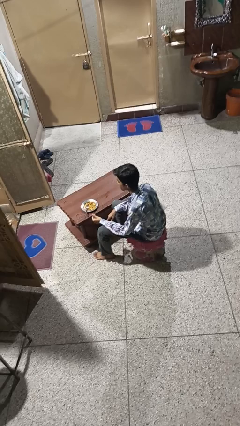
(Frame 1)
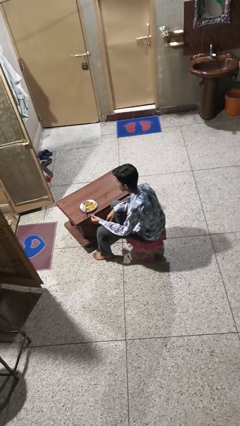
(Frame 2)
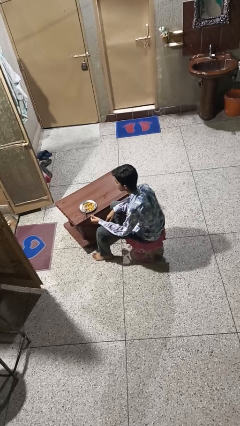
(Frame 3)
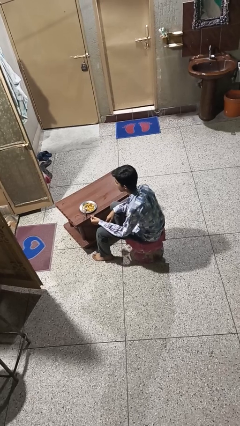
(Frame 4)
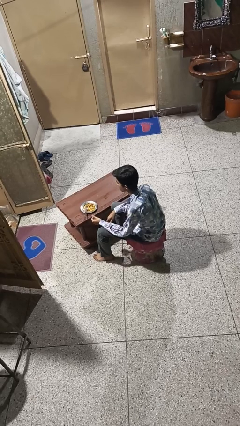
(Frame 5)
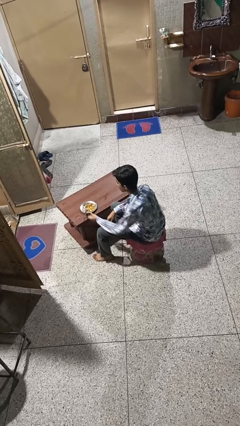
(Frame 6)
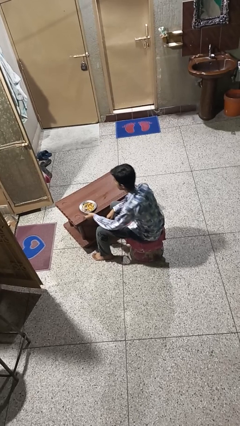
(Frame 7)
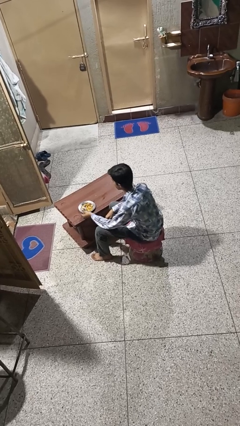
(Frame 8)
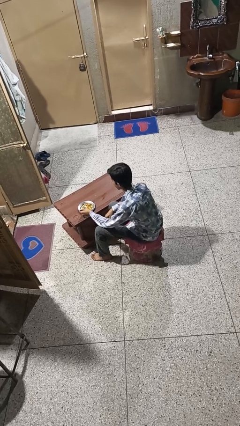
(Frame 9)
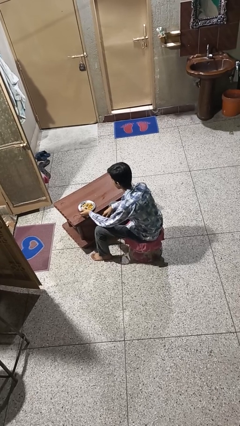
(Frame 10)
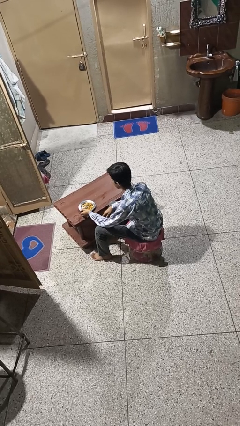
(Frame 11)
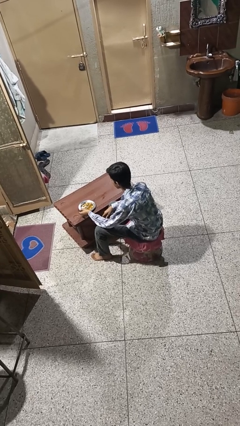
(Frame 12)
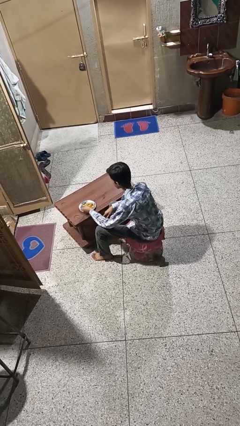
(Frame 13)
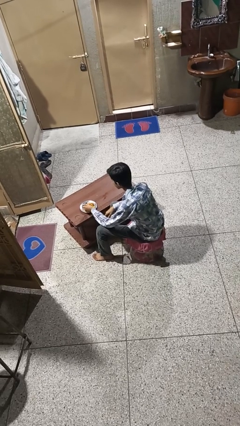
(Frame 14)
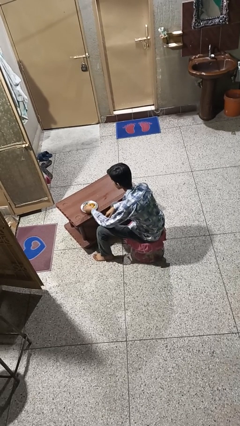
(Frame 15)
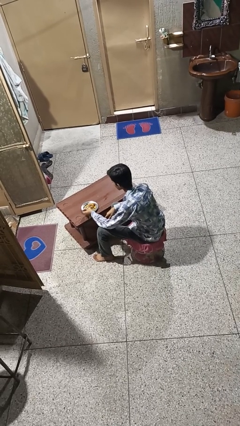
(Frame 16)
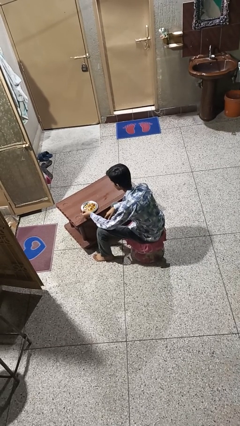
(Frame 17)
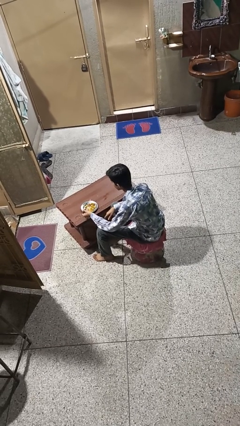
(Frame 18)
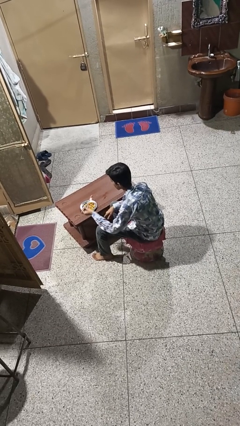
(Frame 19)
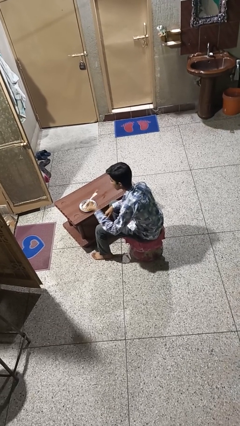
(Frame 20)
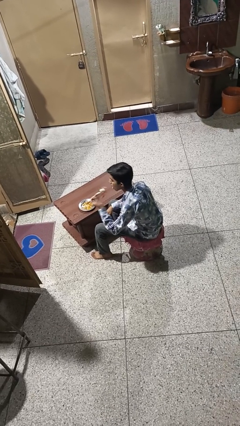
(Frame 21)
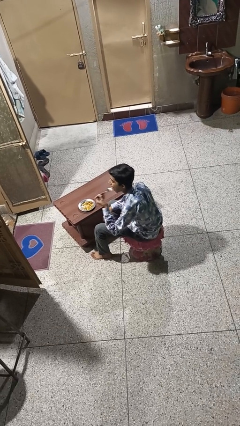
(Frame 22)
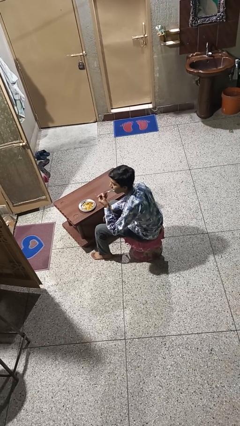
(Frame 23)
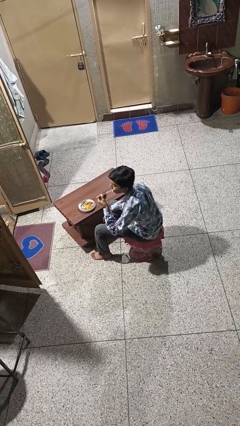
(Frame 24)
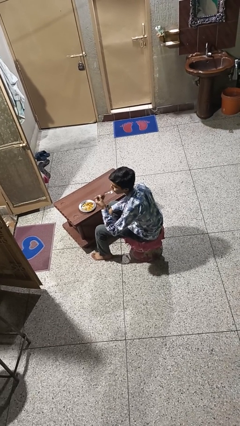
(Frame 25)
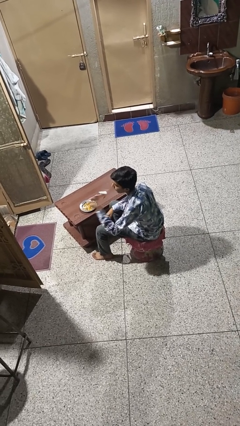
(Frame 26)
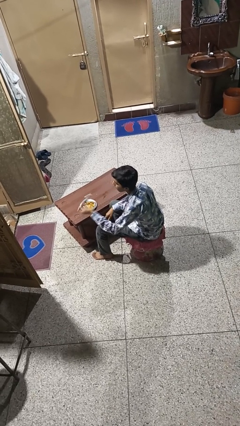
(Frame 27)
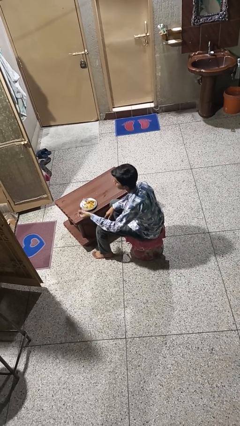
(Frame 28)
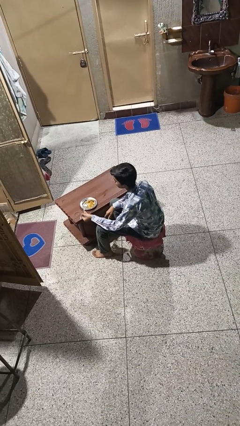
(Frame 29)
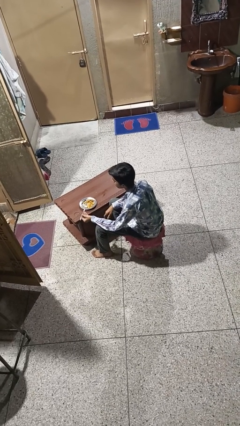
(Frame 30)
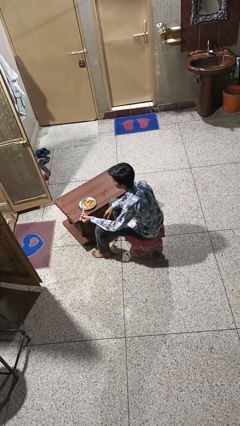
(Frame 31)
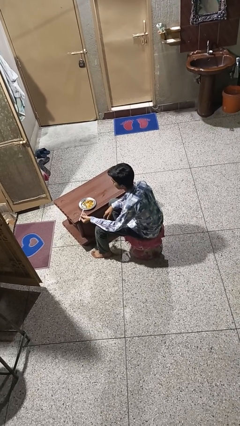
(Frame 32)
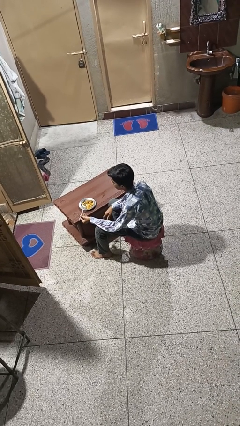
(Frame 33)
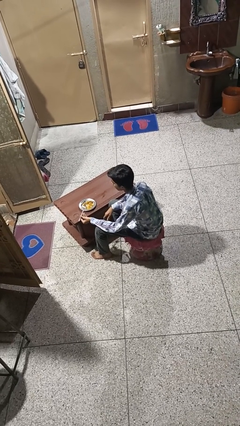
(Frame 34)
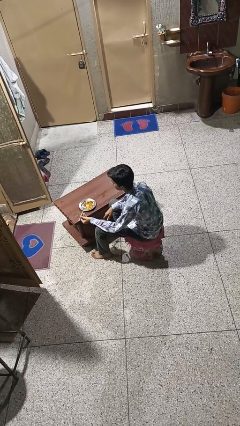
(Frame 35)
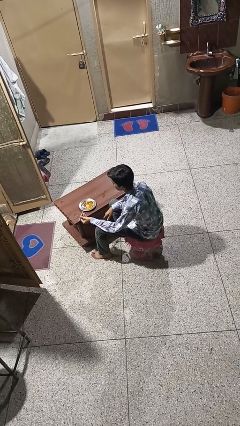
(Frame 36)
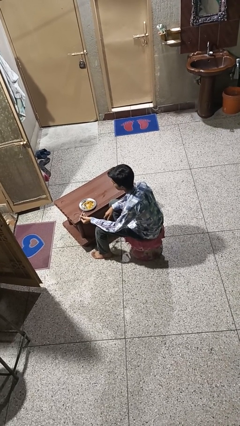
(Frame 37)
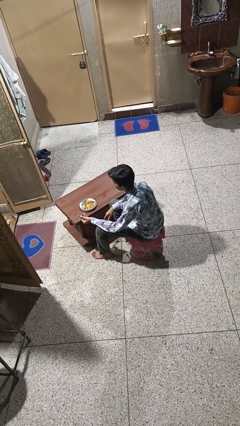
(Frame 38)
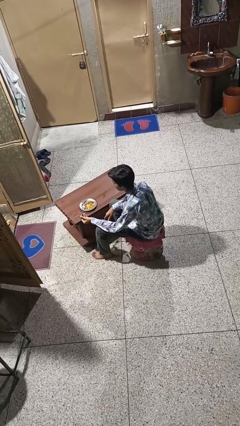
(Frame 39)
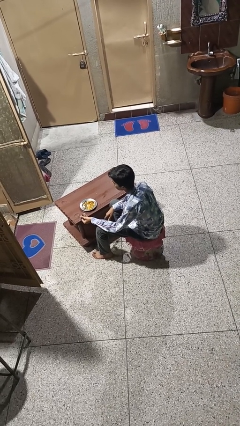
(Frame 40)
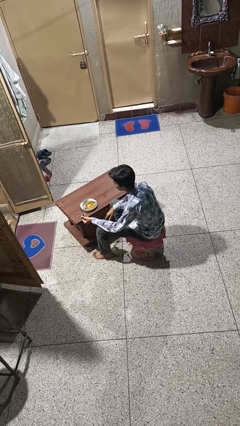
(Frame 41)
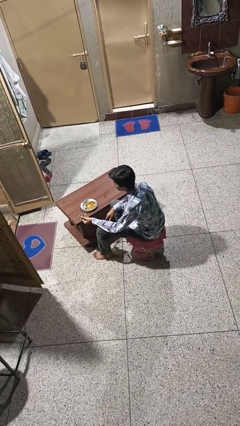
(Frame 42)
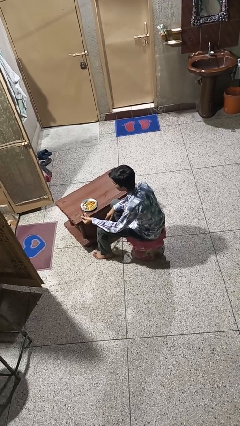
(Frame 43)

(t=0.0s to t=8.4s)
person eats with utensil

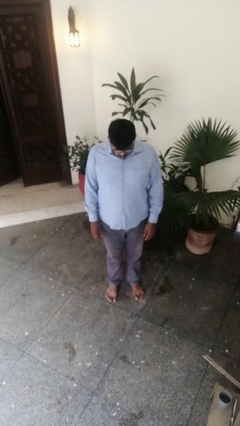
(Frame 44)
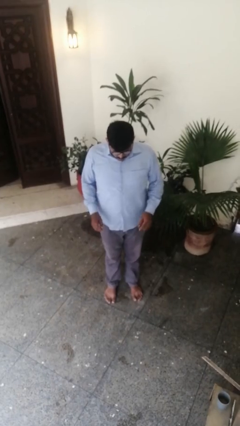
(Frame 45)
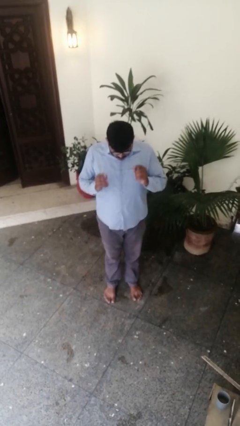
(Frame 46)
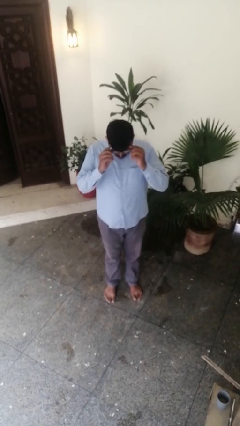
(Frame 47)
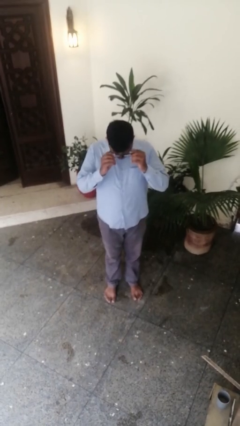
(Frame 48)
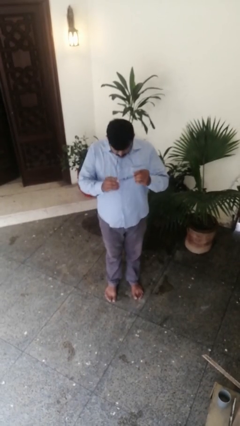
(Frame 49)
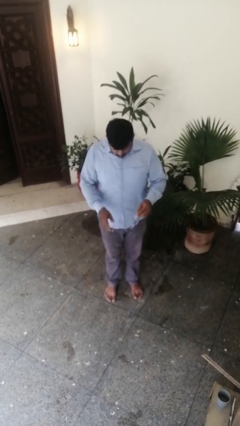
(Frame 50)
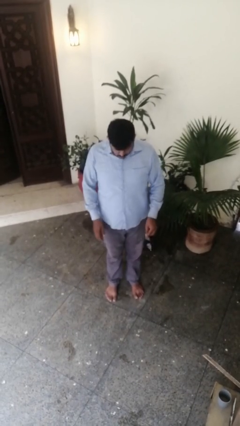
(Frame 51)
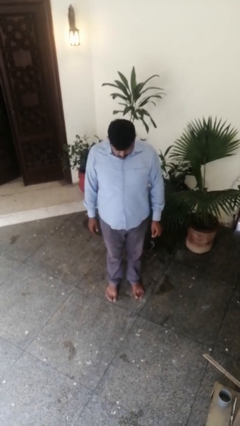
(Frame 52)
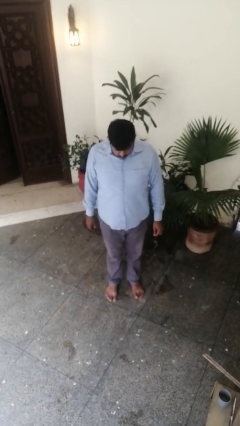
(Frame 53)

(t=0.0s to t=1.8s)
person takes off glasses

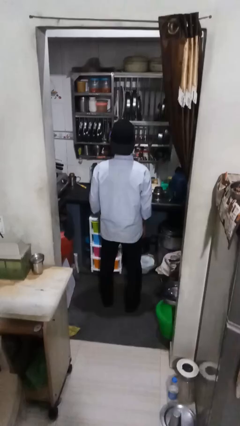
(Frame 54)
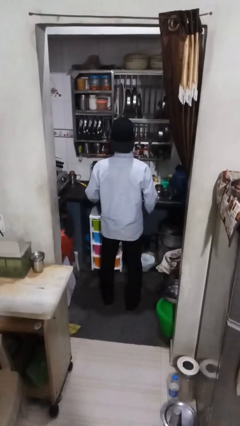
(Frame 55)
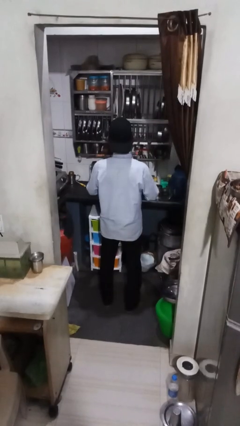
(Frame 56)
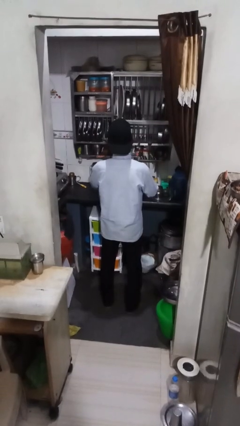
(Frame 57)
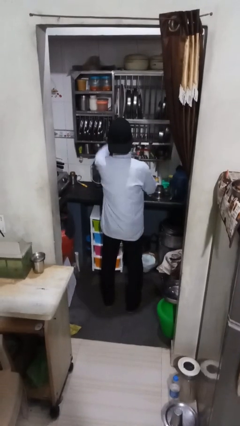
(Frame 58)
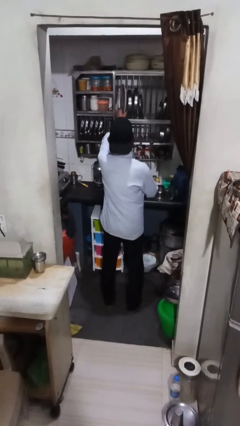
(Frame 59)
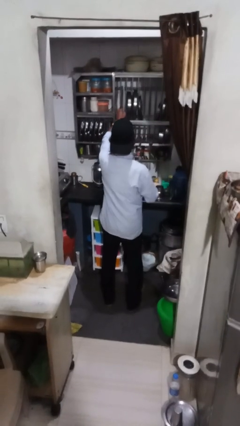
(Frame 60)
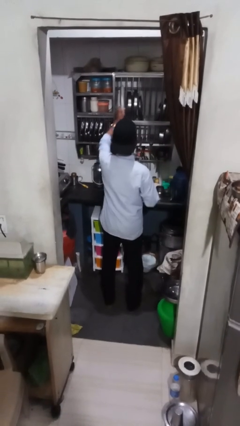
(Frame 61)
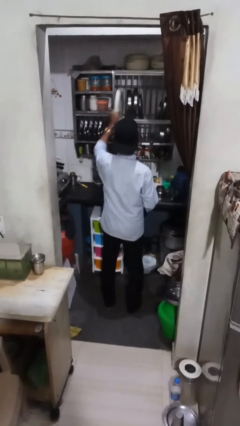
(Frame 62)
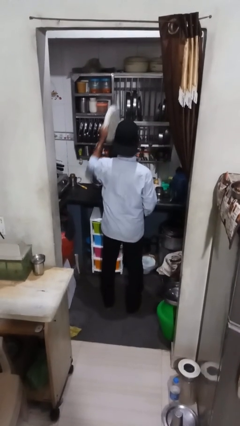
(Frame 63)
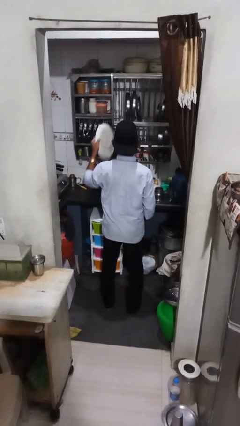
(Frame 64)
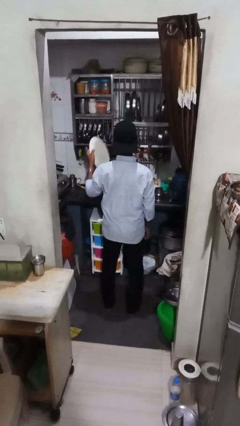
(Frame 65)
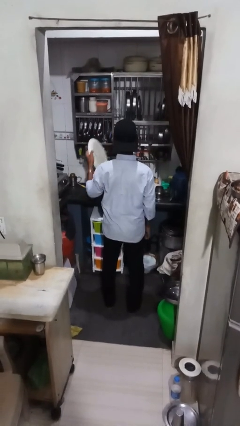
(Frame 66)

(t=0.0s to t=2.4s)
person takes object from cabinet

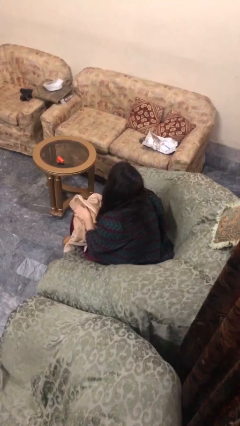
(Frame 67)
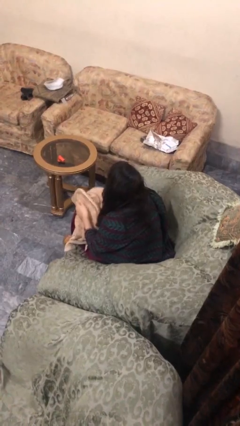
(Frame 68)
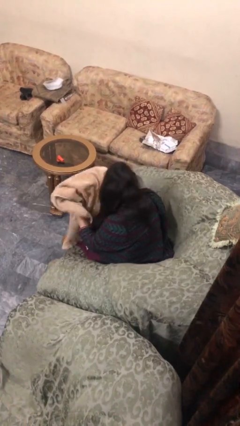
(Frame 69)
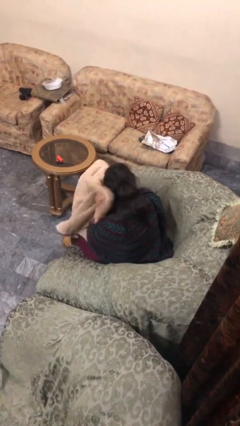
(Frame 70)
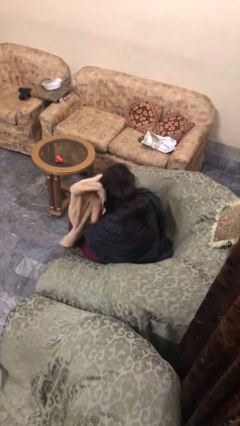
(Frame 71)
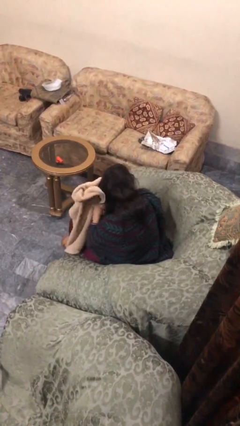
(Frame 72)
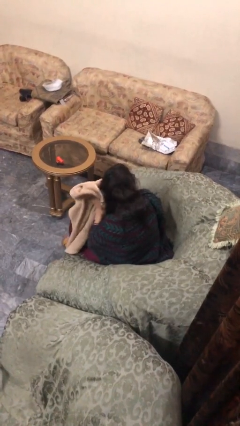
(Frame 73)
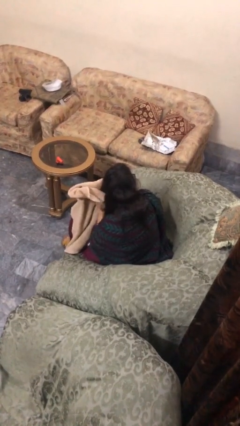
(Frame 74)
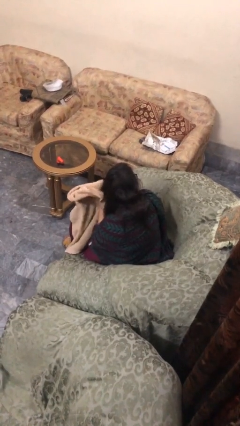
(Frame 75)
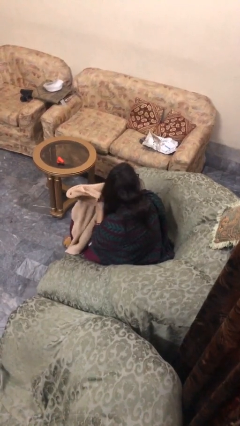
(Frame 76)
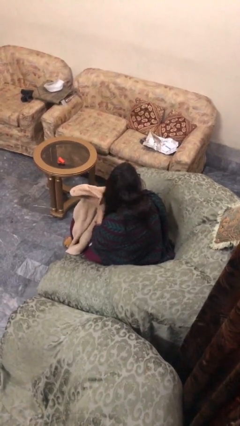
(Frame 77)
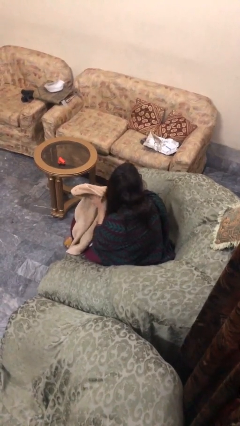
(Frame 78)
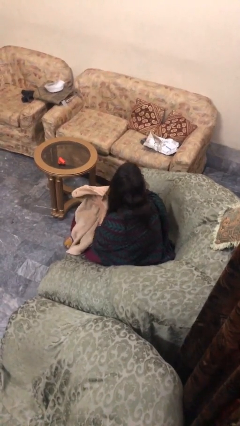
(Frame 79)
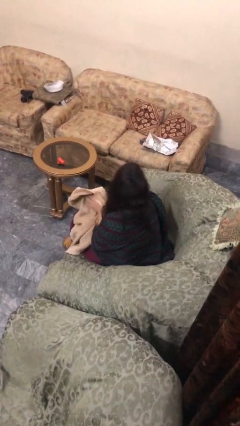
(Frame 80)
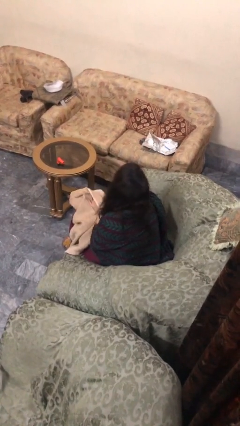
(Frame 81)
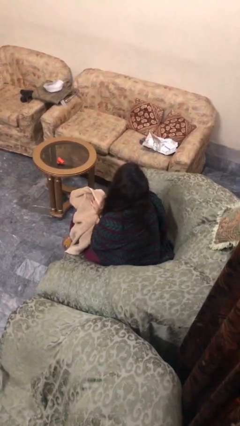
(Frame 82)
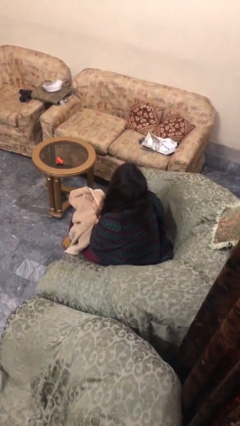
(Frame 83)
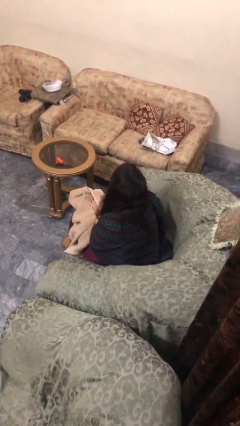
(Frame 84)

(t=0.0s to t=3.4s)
person dries hair with towel

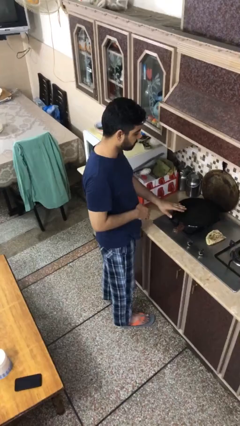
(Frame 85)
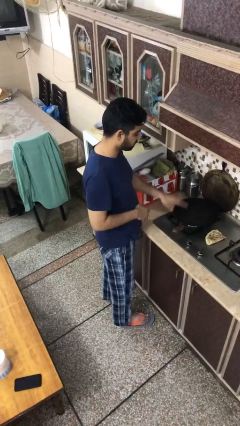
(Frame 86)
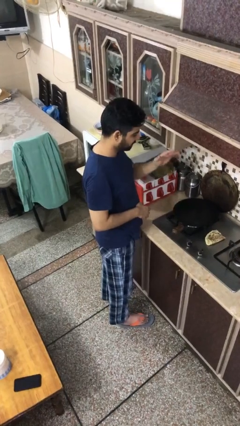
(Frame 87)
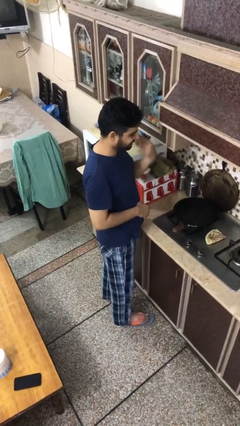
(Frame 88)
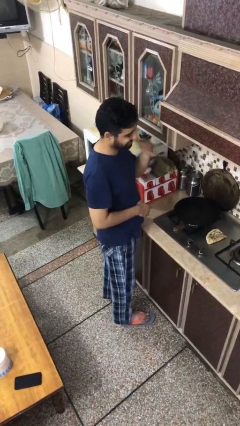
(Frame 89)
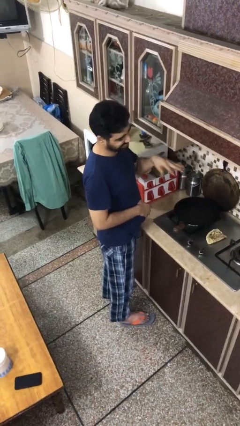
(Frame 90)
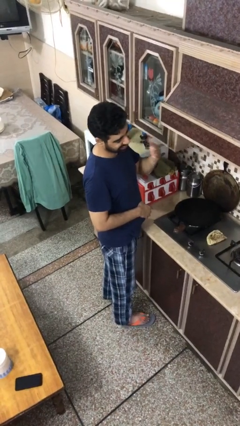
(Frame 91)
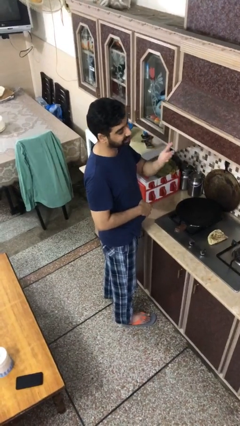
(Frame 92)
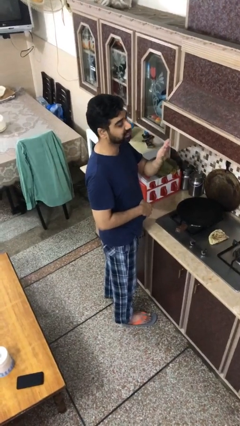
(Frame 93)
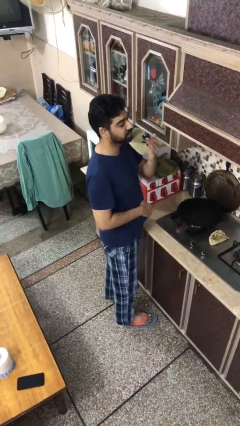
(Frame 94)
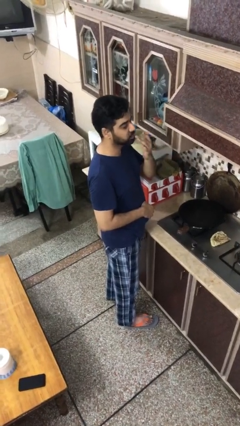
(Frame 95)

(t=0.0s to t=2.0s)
person burns hand
